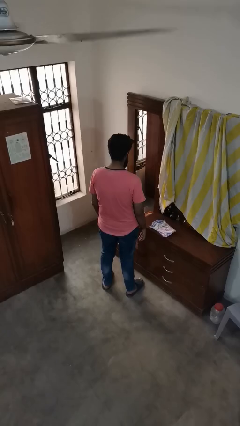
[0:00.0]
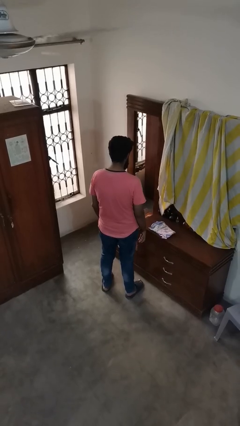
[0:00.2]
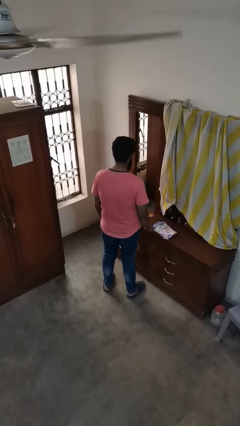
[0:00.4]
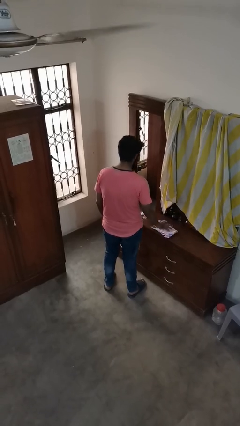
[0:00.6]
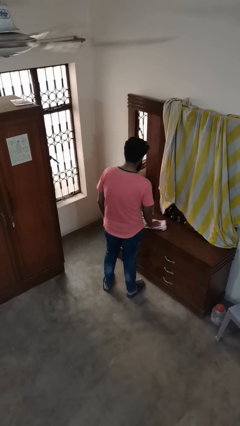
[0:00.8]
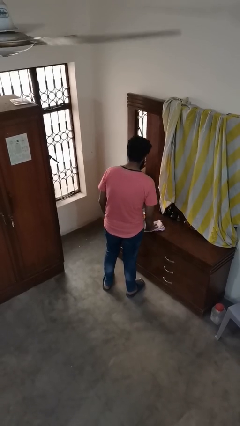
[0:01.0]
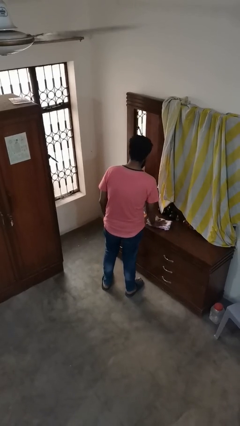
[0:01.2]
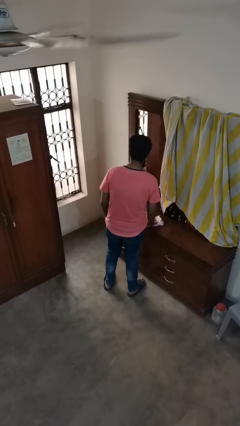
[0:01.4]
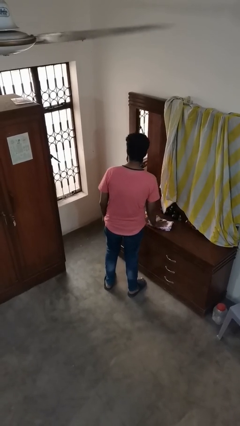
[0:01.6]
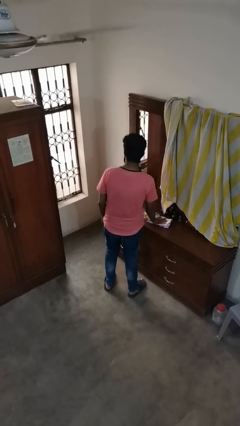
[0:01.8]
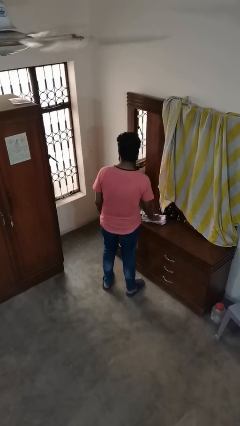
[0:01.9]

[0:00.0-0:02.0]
person cleans table with rag

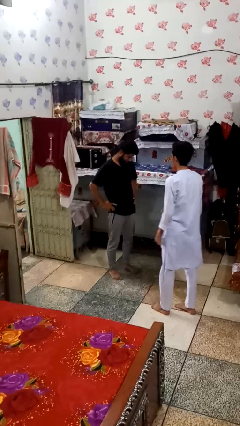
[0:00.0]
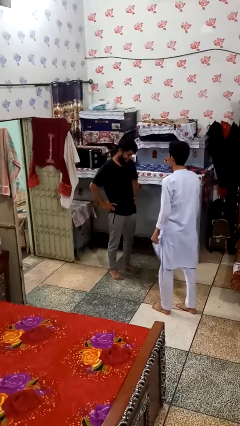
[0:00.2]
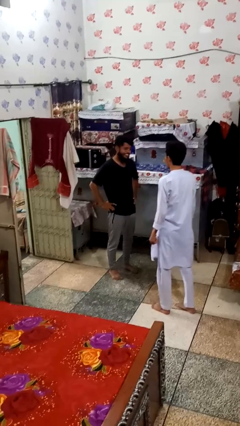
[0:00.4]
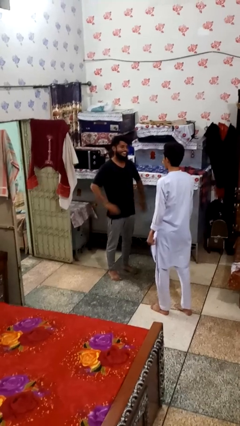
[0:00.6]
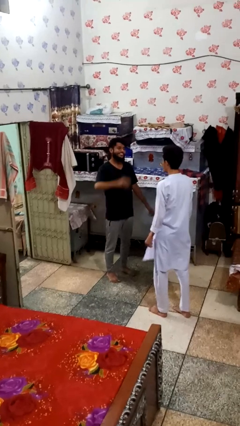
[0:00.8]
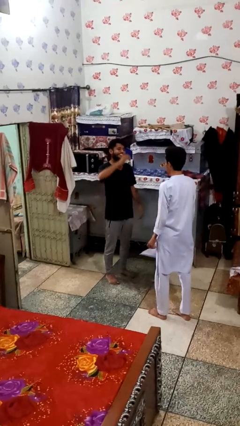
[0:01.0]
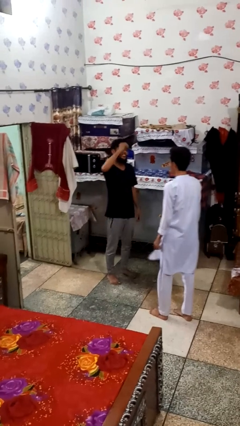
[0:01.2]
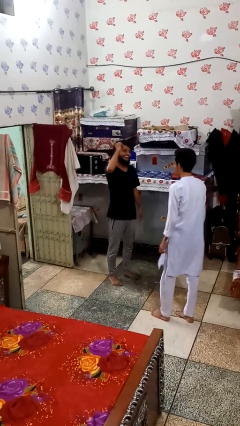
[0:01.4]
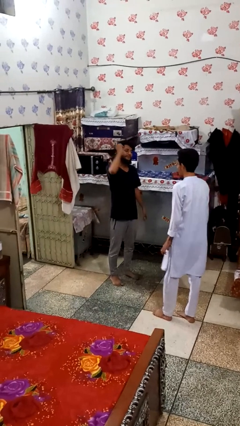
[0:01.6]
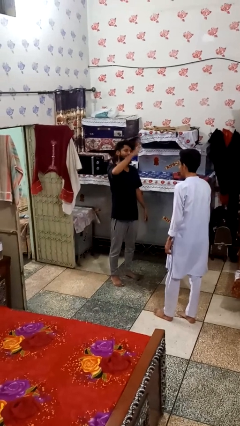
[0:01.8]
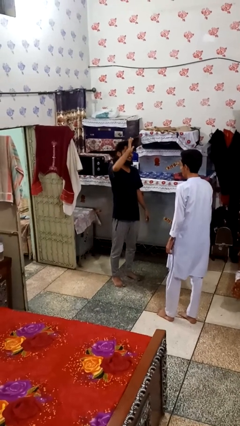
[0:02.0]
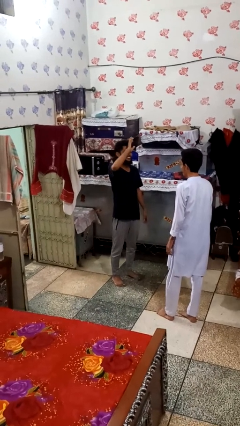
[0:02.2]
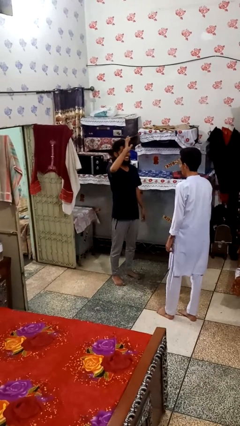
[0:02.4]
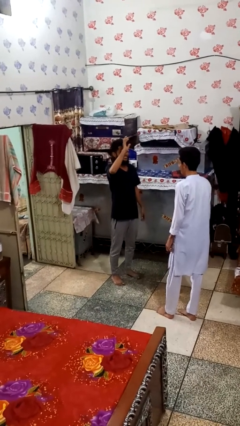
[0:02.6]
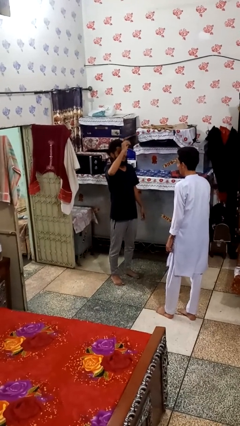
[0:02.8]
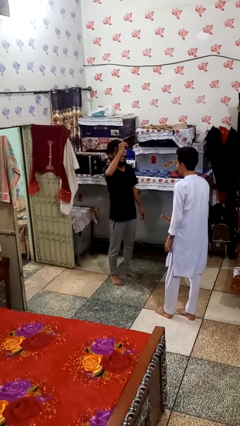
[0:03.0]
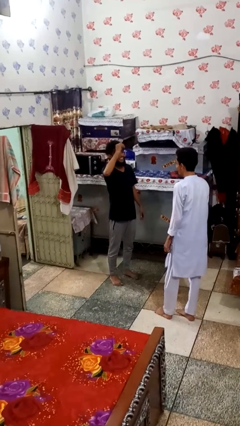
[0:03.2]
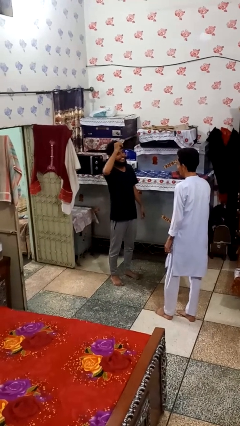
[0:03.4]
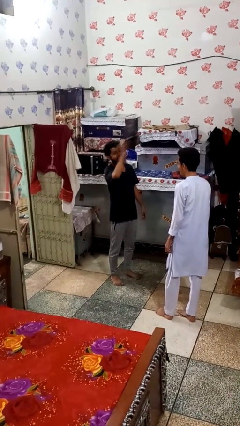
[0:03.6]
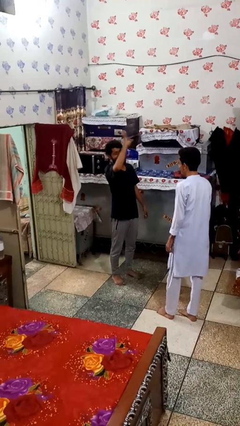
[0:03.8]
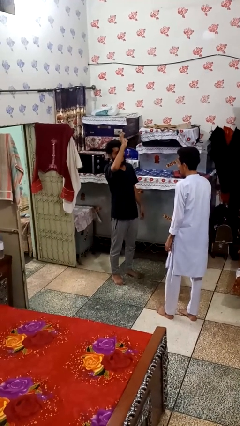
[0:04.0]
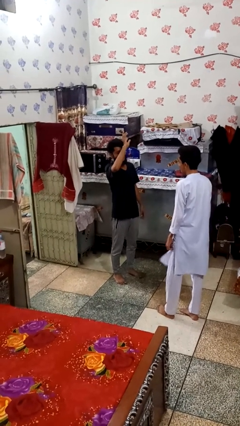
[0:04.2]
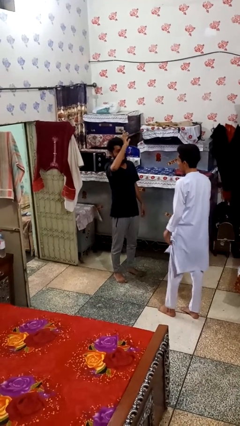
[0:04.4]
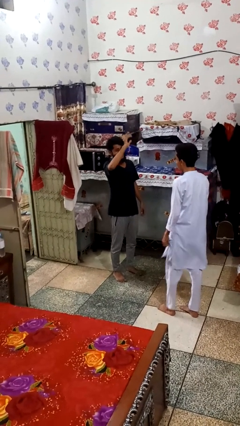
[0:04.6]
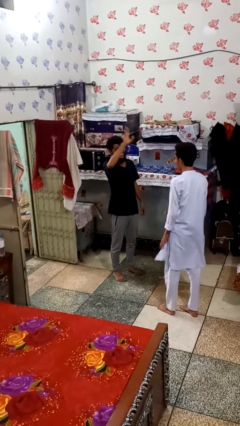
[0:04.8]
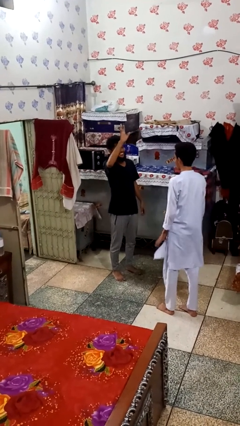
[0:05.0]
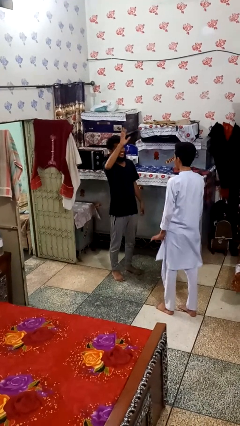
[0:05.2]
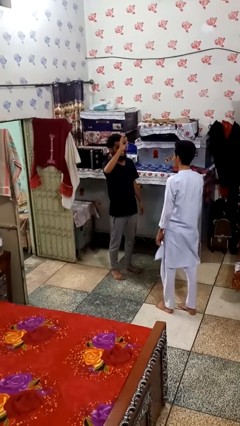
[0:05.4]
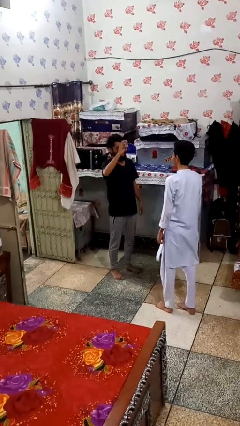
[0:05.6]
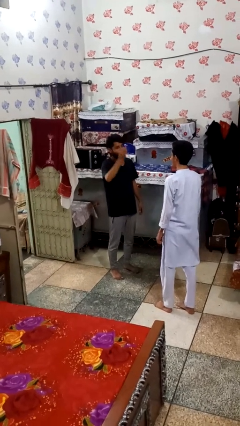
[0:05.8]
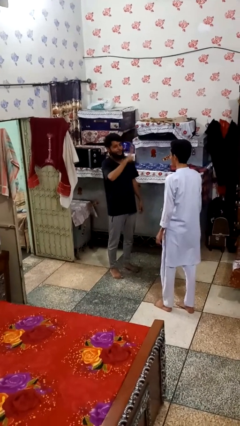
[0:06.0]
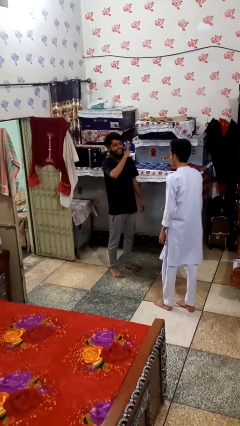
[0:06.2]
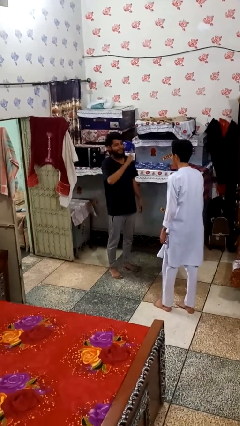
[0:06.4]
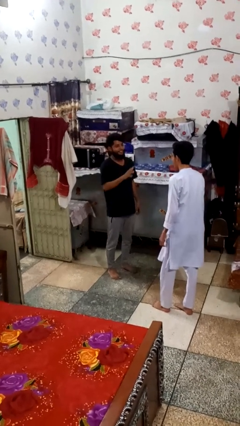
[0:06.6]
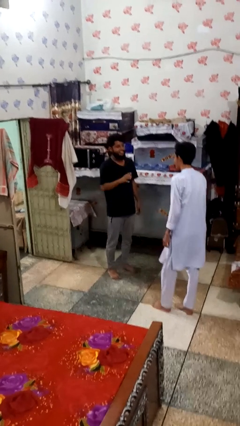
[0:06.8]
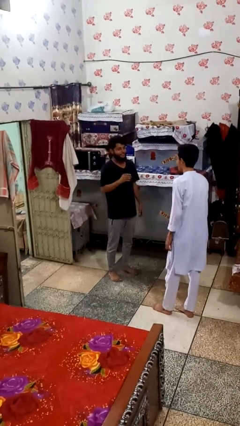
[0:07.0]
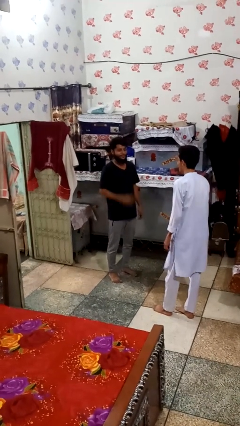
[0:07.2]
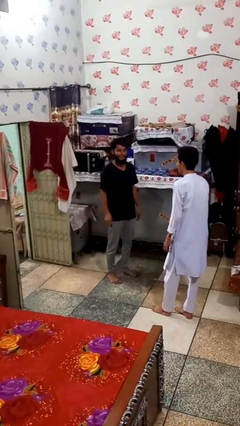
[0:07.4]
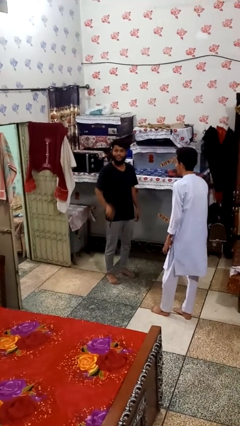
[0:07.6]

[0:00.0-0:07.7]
person laughs with person

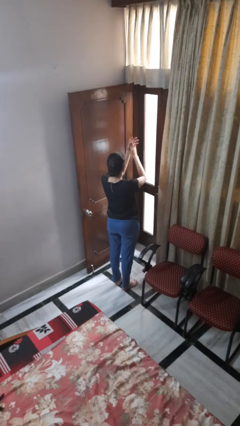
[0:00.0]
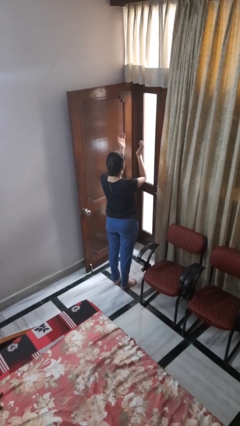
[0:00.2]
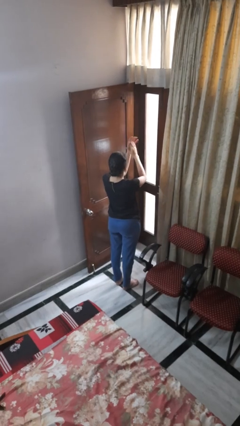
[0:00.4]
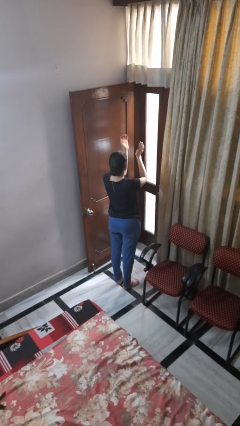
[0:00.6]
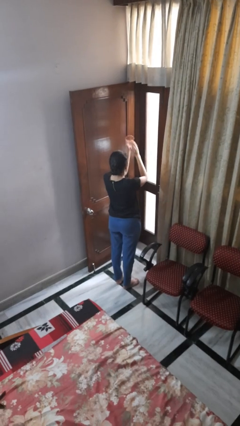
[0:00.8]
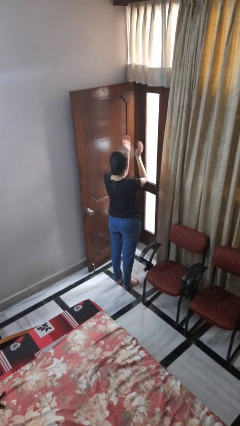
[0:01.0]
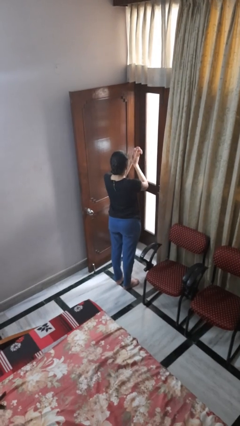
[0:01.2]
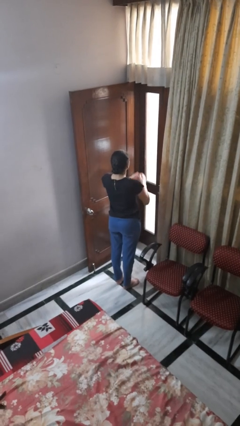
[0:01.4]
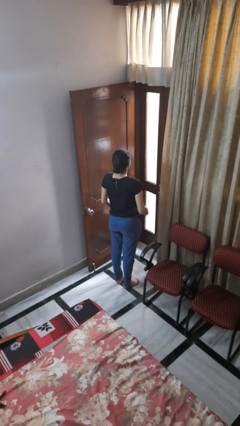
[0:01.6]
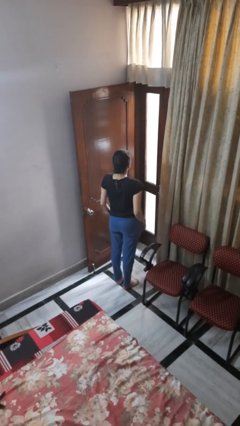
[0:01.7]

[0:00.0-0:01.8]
person claps hands

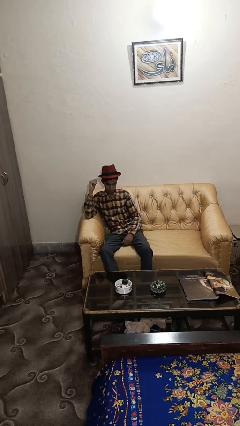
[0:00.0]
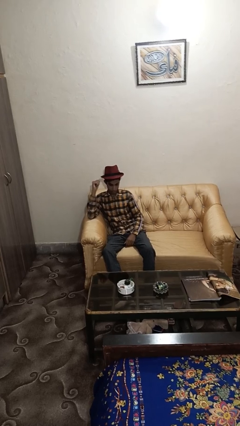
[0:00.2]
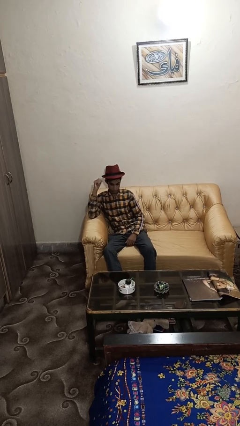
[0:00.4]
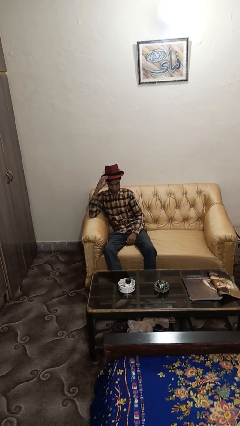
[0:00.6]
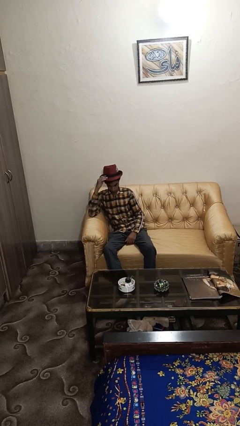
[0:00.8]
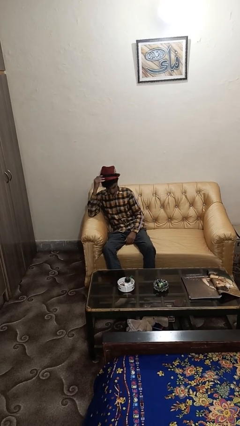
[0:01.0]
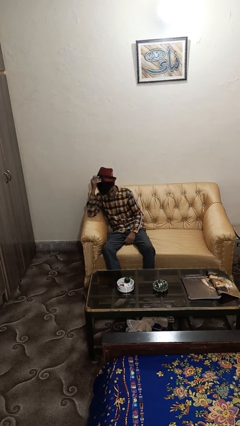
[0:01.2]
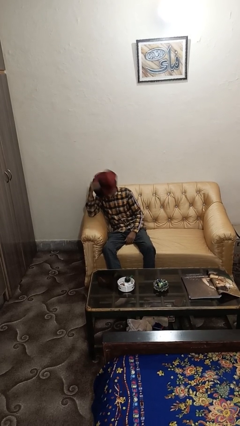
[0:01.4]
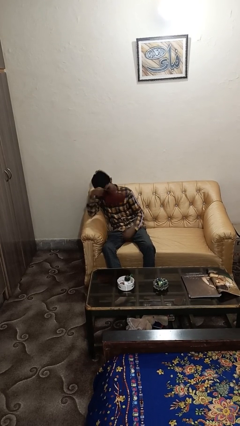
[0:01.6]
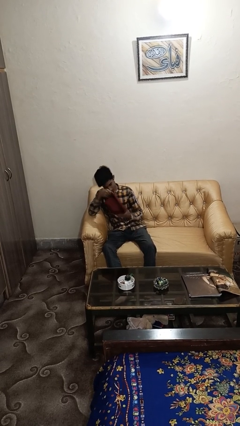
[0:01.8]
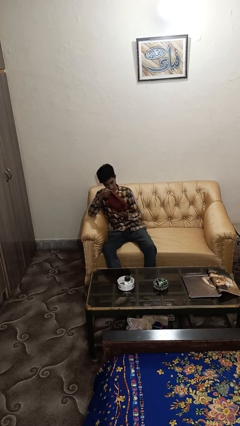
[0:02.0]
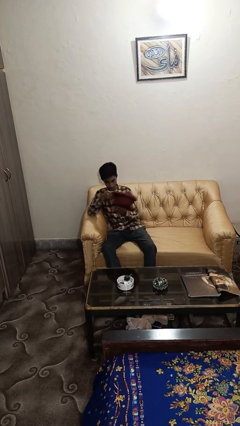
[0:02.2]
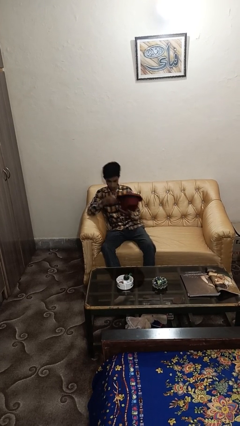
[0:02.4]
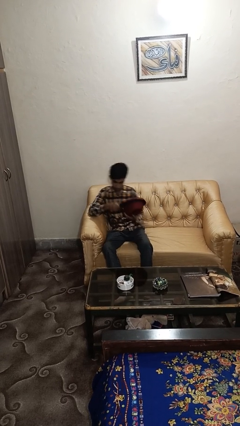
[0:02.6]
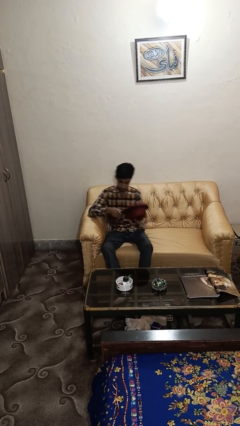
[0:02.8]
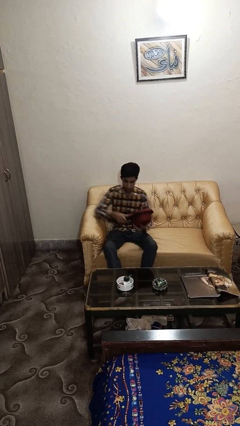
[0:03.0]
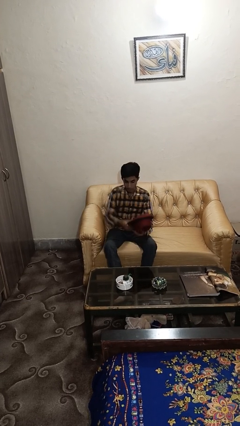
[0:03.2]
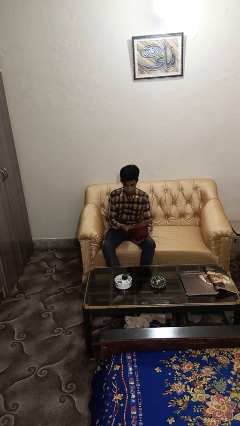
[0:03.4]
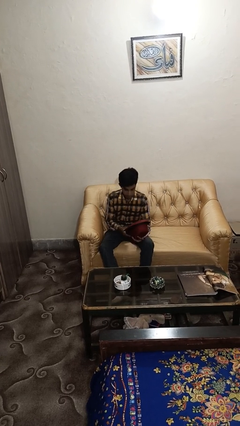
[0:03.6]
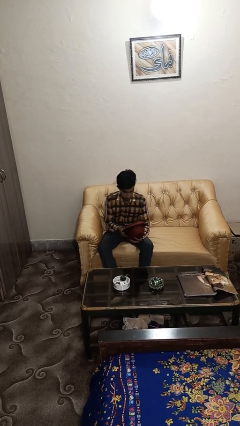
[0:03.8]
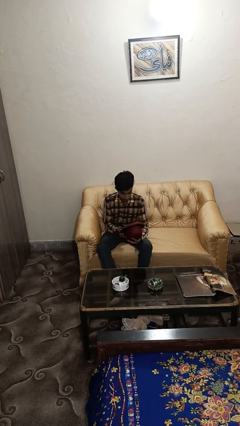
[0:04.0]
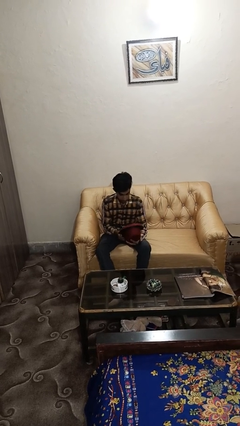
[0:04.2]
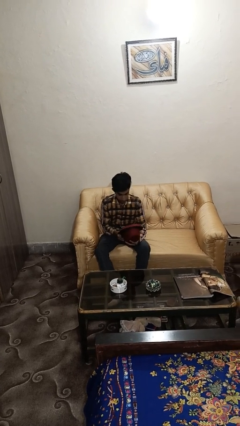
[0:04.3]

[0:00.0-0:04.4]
person takes off hat

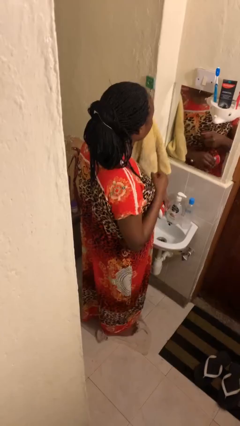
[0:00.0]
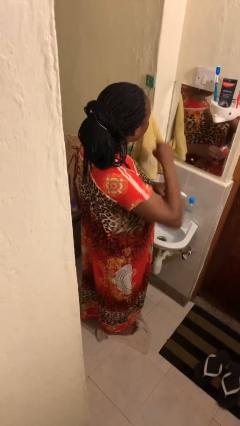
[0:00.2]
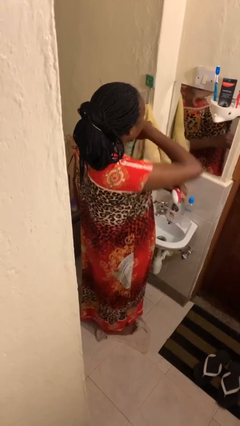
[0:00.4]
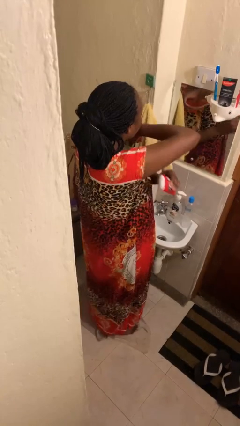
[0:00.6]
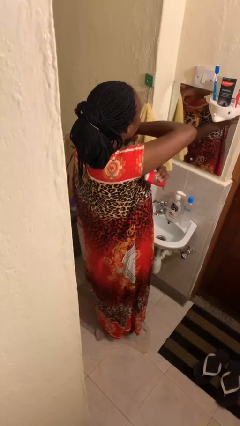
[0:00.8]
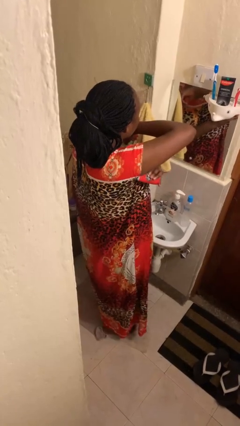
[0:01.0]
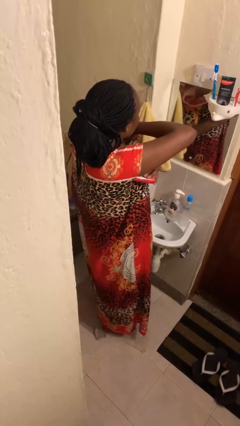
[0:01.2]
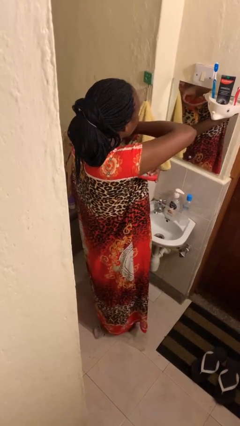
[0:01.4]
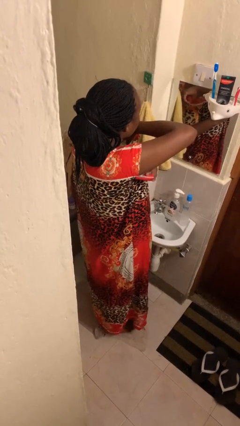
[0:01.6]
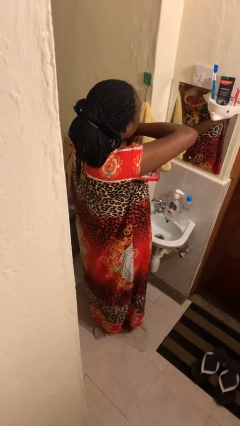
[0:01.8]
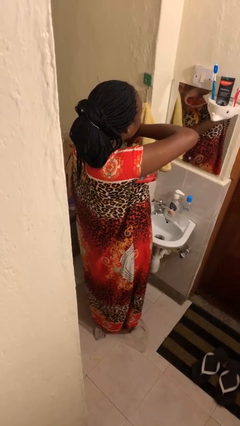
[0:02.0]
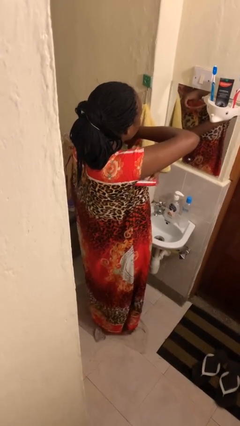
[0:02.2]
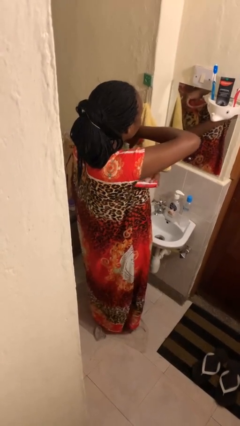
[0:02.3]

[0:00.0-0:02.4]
person applies deodorant
